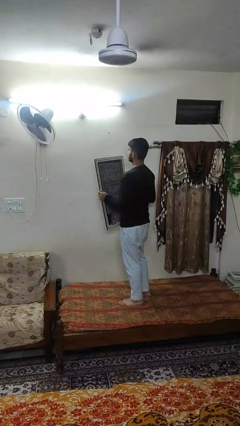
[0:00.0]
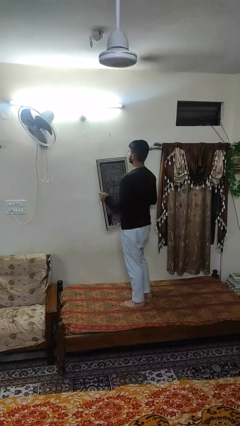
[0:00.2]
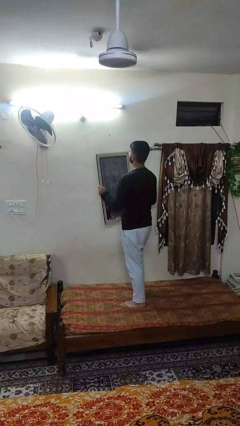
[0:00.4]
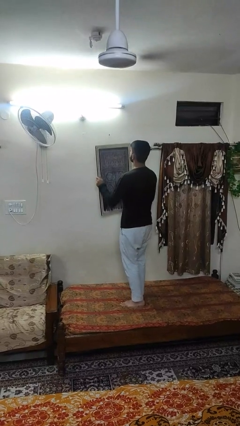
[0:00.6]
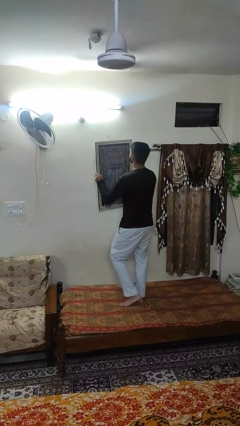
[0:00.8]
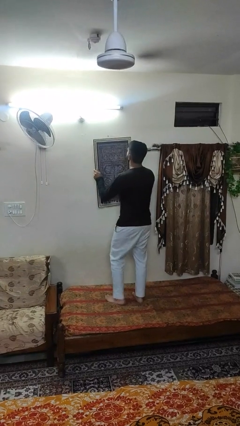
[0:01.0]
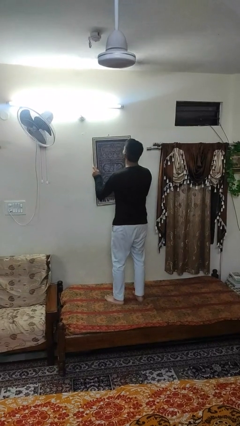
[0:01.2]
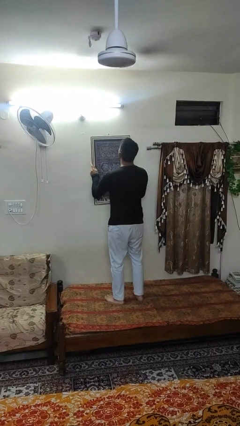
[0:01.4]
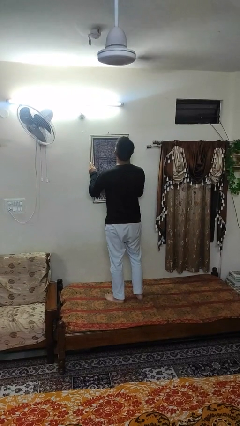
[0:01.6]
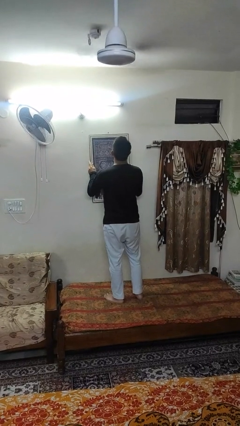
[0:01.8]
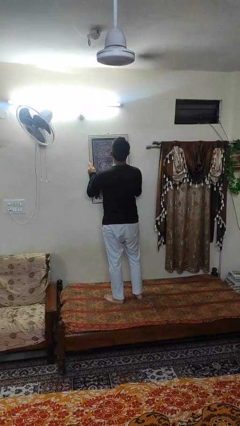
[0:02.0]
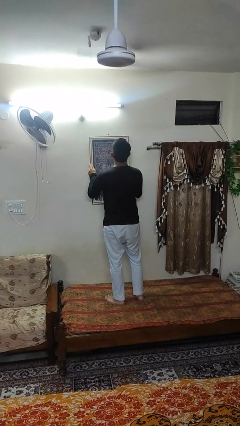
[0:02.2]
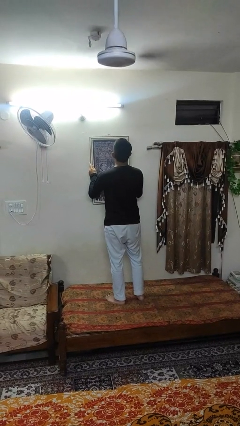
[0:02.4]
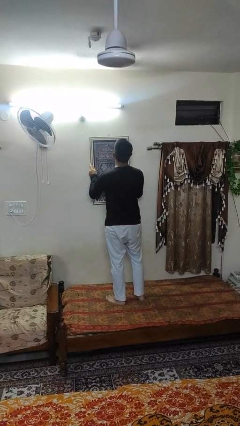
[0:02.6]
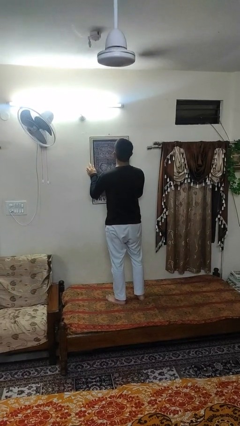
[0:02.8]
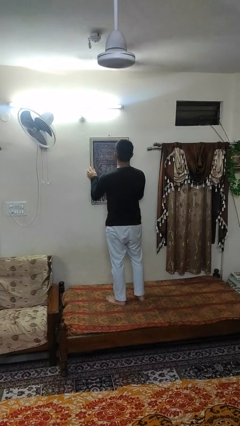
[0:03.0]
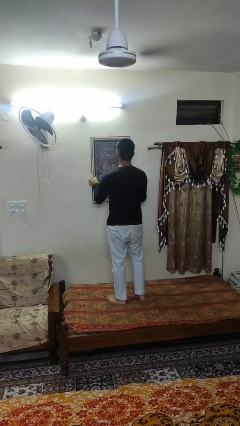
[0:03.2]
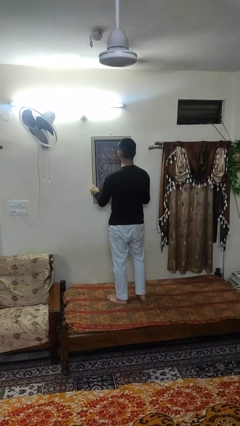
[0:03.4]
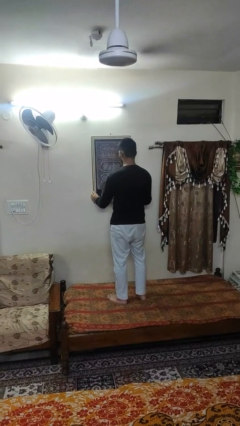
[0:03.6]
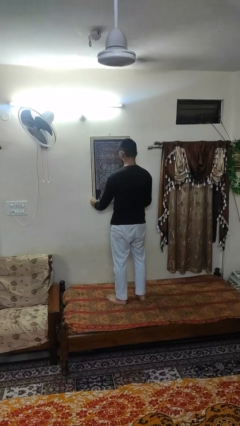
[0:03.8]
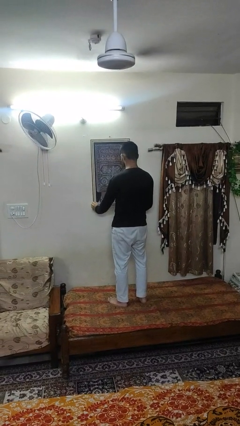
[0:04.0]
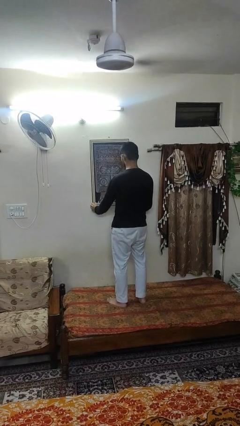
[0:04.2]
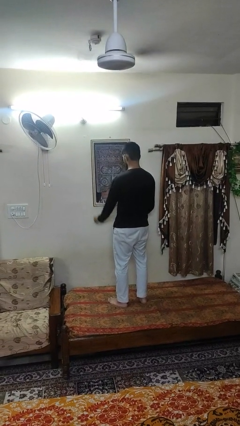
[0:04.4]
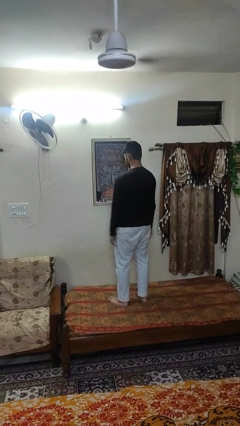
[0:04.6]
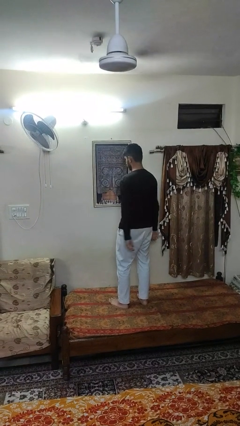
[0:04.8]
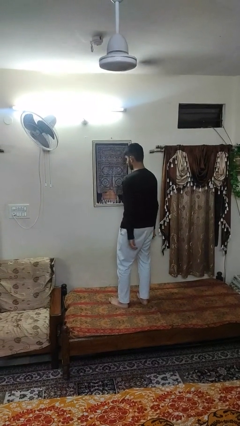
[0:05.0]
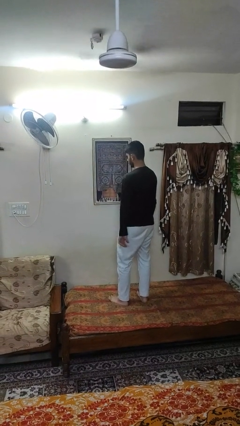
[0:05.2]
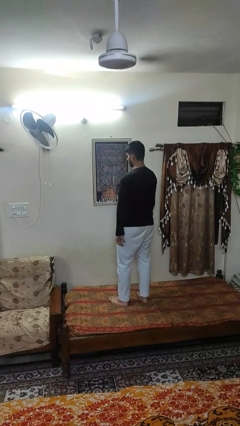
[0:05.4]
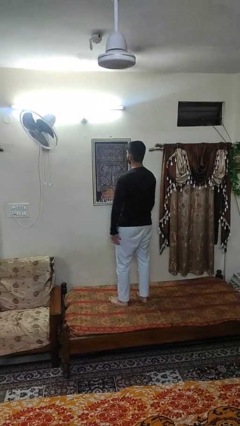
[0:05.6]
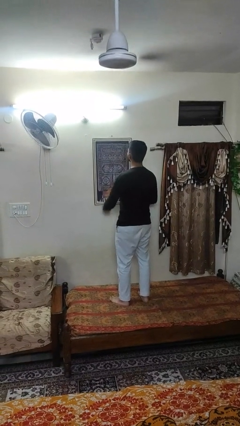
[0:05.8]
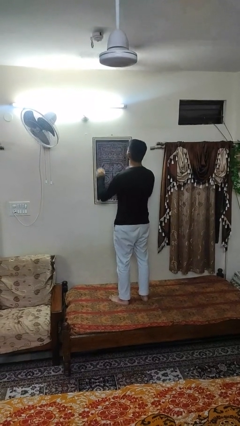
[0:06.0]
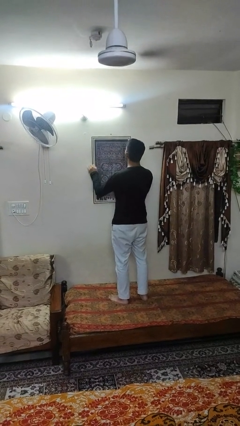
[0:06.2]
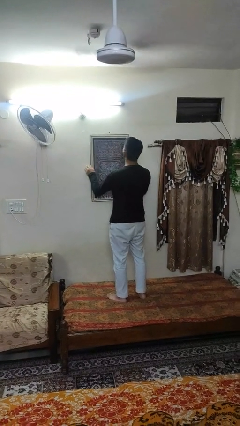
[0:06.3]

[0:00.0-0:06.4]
person puts up picture frame

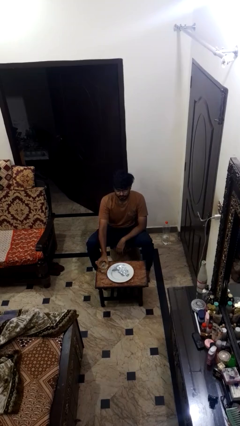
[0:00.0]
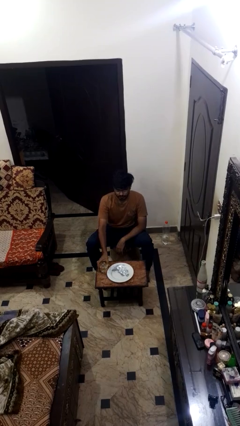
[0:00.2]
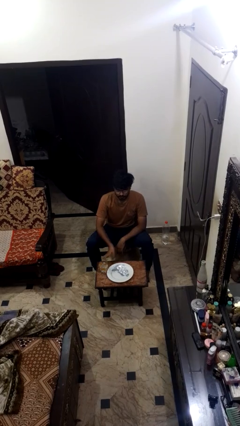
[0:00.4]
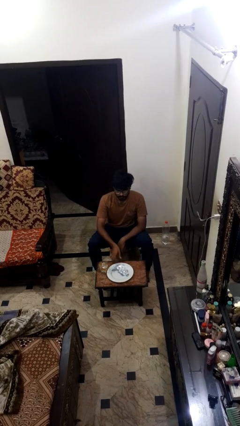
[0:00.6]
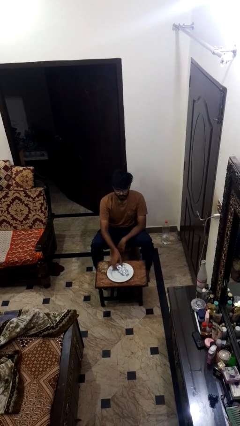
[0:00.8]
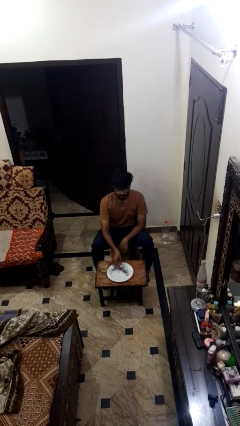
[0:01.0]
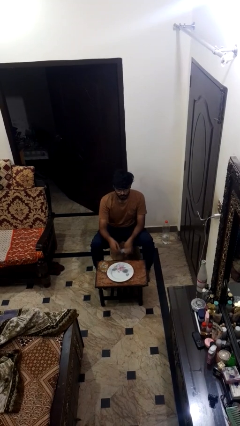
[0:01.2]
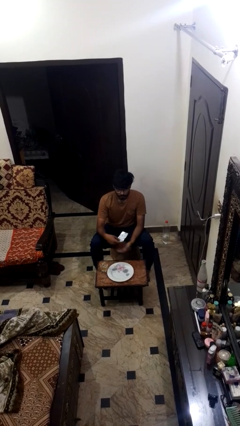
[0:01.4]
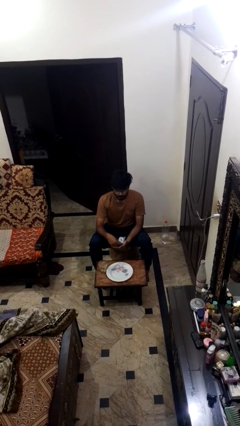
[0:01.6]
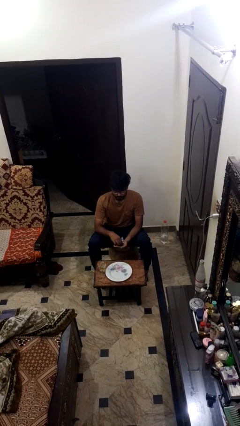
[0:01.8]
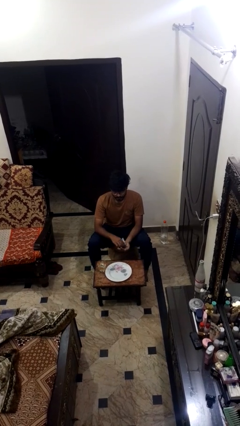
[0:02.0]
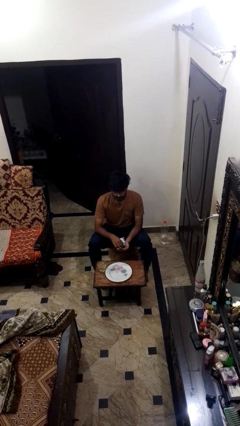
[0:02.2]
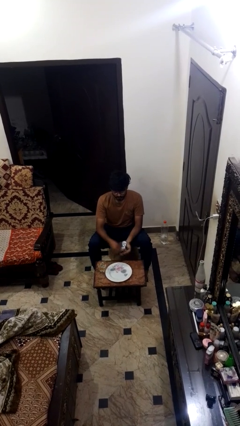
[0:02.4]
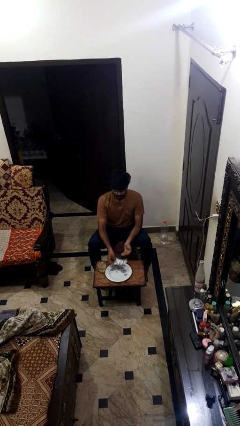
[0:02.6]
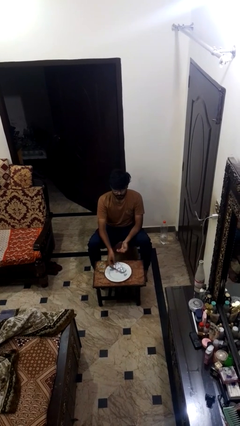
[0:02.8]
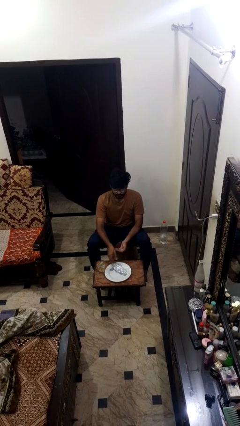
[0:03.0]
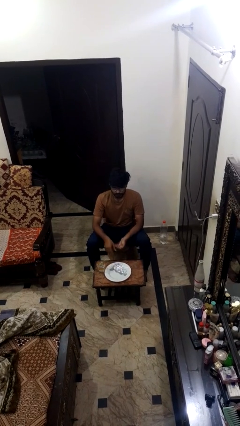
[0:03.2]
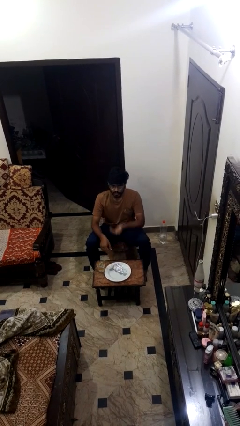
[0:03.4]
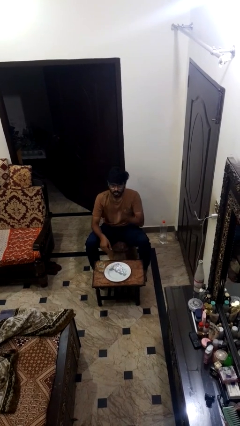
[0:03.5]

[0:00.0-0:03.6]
person takes medicine pills

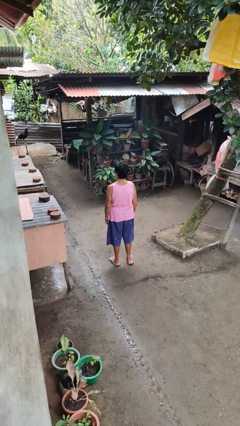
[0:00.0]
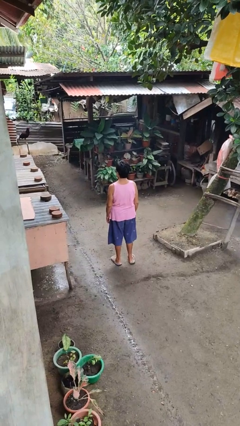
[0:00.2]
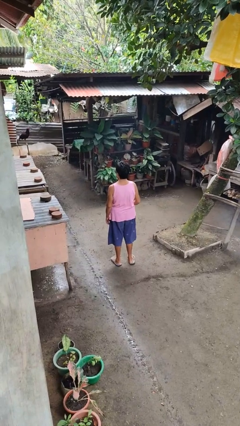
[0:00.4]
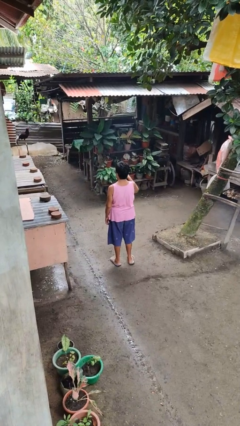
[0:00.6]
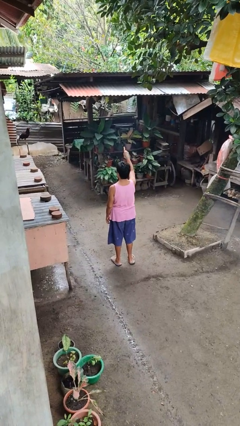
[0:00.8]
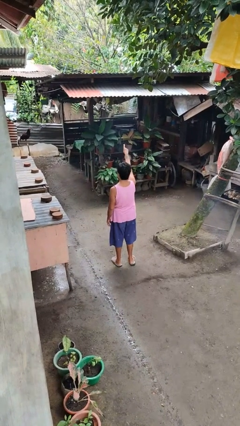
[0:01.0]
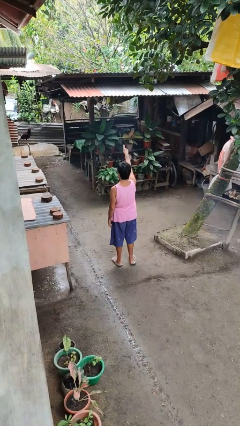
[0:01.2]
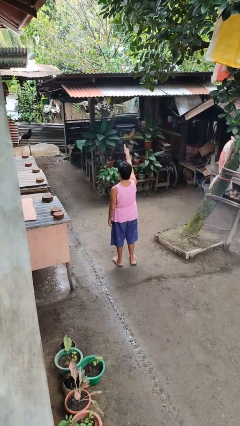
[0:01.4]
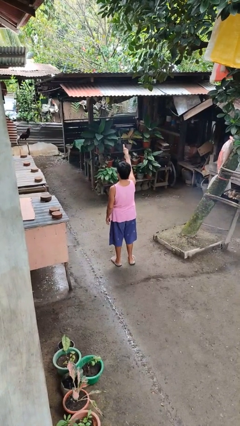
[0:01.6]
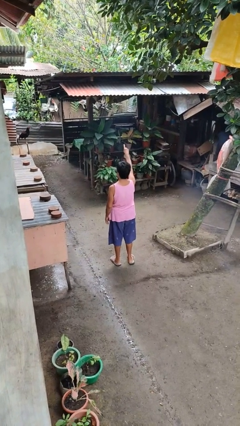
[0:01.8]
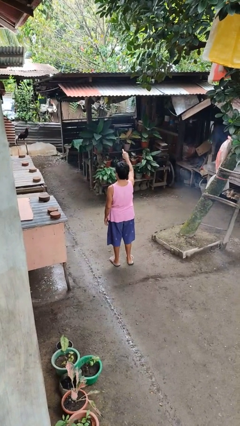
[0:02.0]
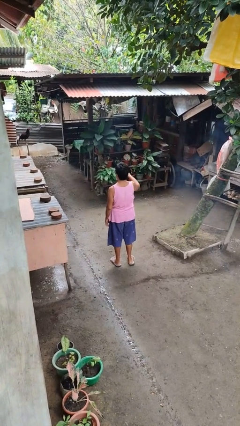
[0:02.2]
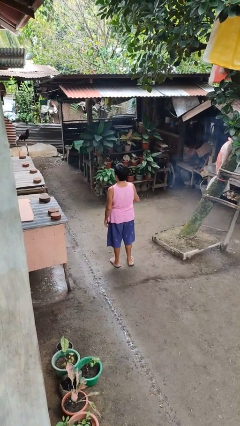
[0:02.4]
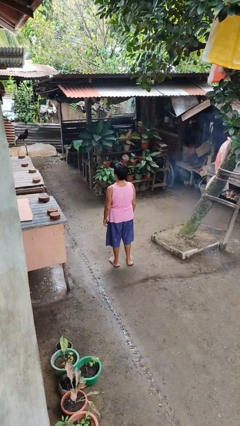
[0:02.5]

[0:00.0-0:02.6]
person points at person

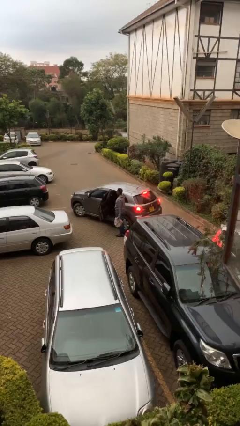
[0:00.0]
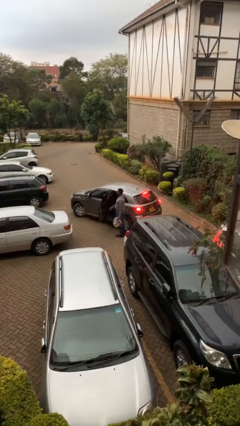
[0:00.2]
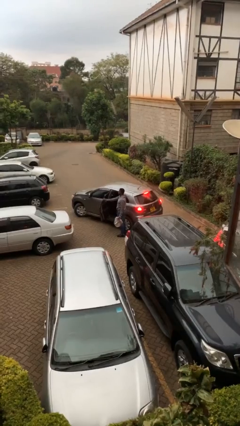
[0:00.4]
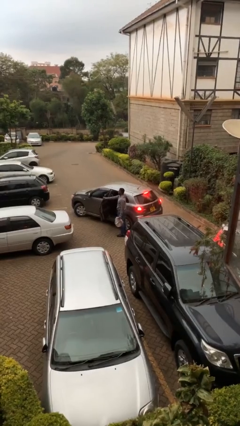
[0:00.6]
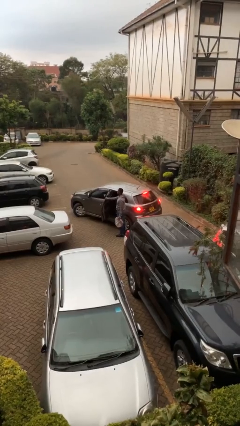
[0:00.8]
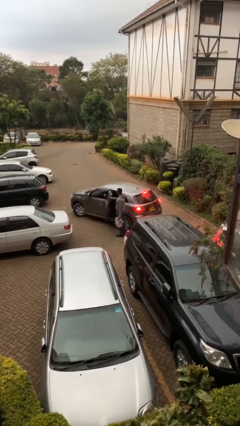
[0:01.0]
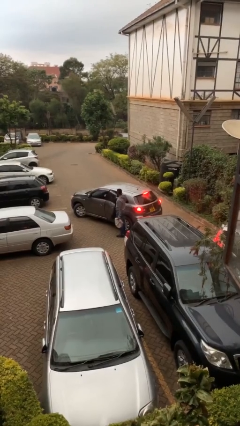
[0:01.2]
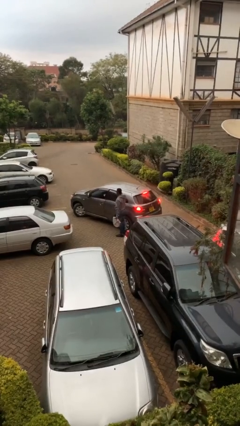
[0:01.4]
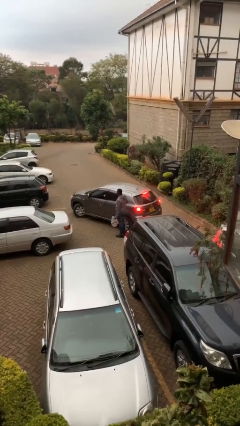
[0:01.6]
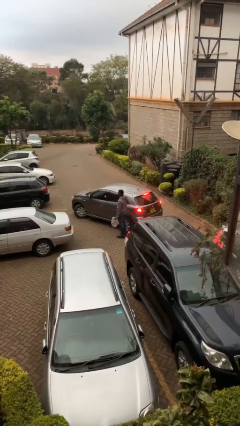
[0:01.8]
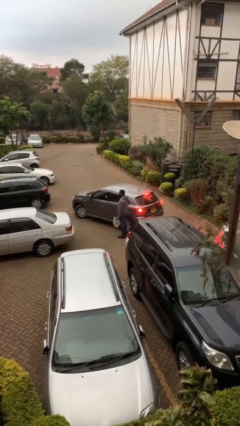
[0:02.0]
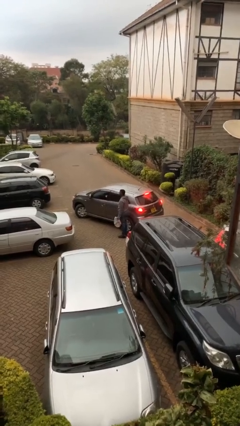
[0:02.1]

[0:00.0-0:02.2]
person closes car door

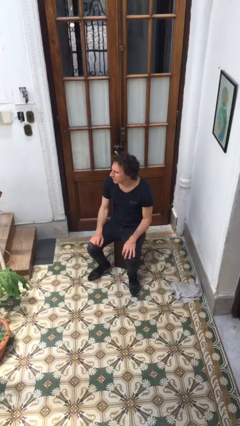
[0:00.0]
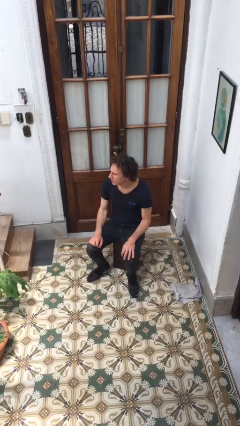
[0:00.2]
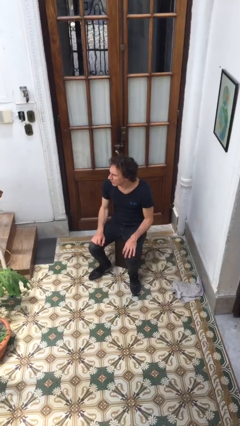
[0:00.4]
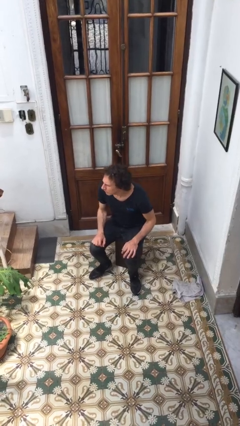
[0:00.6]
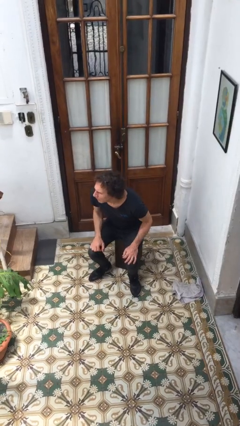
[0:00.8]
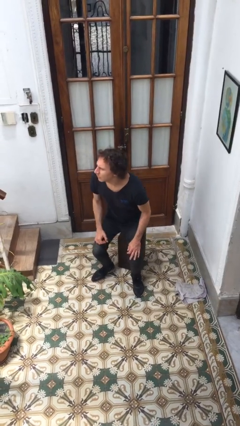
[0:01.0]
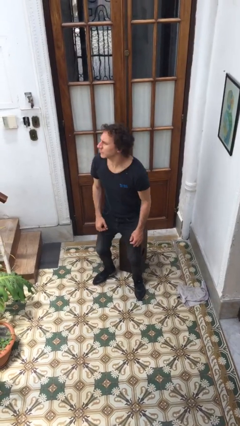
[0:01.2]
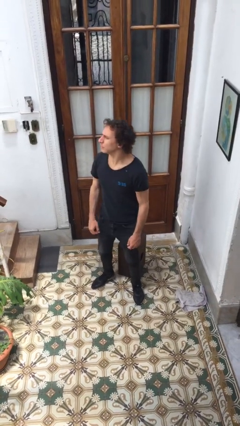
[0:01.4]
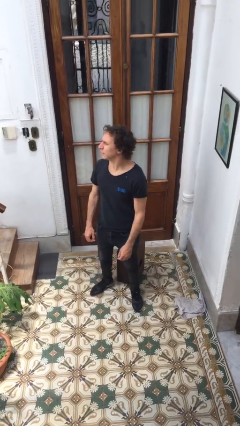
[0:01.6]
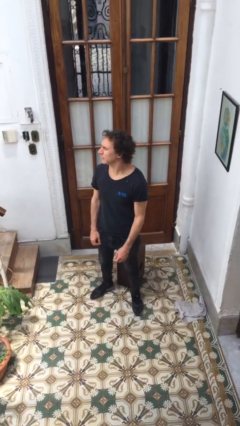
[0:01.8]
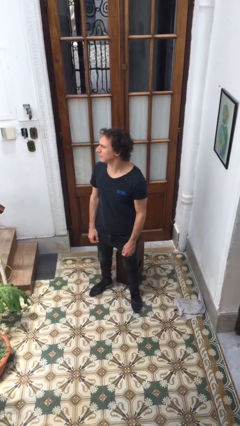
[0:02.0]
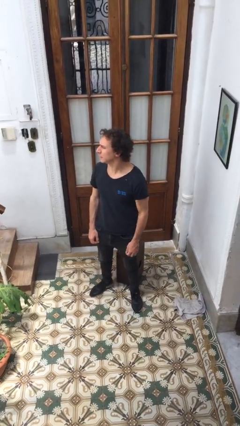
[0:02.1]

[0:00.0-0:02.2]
person stands up

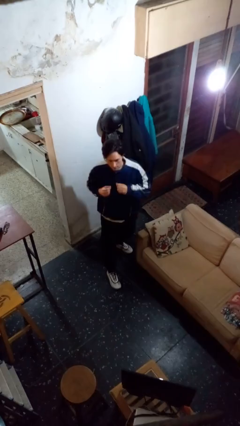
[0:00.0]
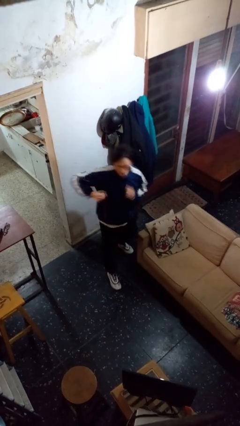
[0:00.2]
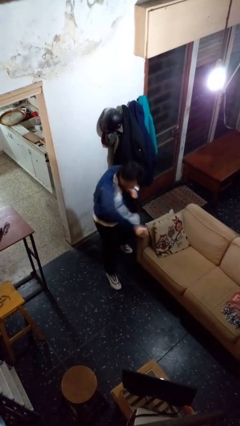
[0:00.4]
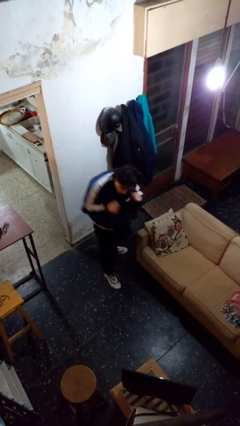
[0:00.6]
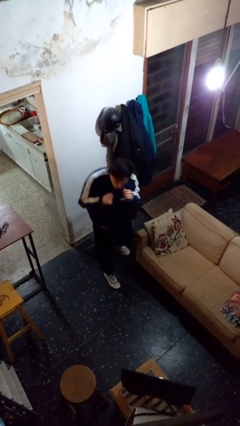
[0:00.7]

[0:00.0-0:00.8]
person karate chop
